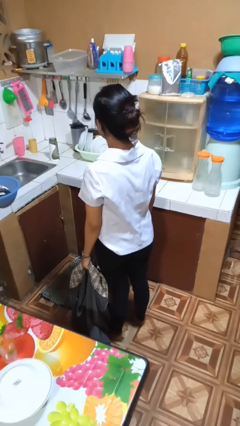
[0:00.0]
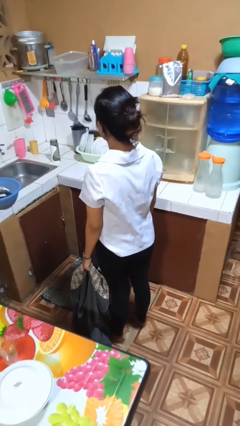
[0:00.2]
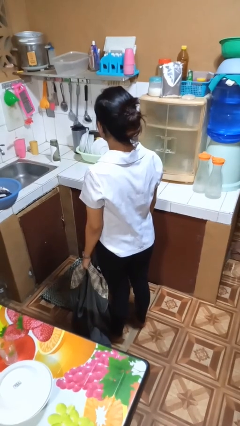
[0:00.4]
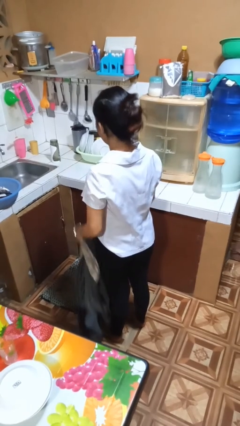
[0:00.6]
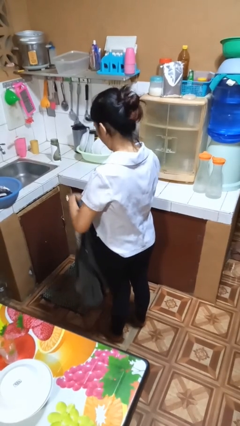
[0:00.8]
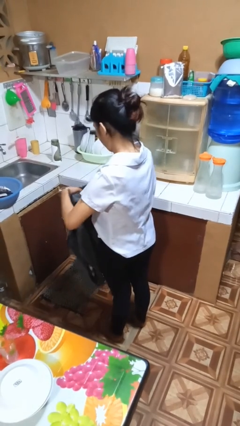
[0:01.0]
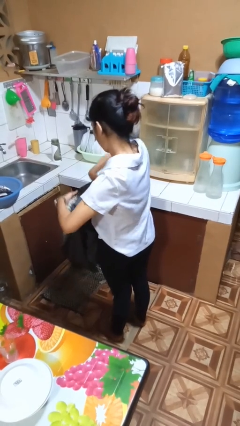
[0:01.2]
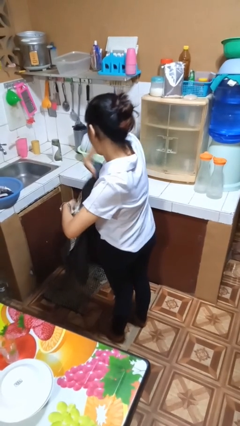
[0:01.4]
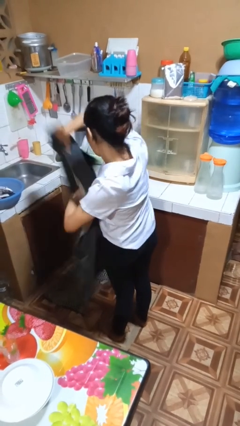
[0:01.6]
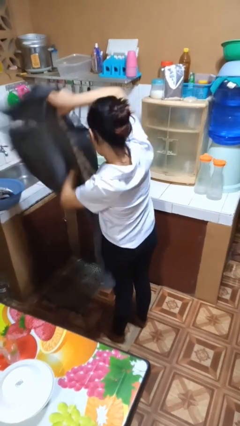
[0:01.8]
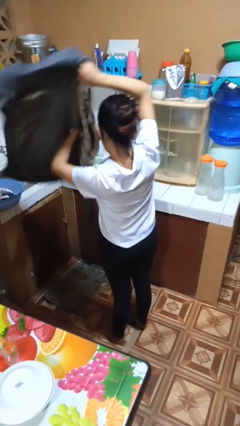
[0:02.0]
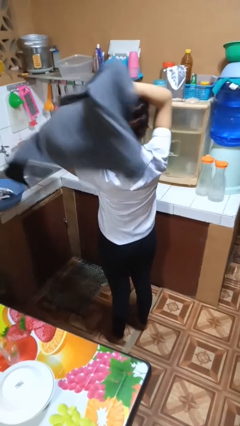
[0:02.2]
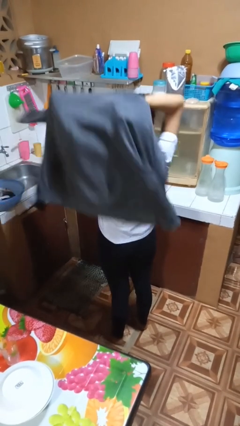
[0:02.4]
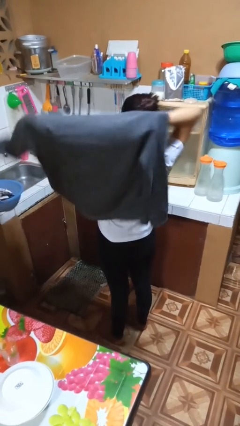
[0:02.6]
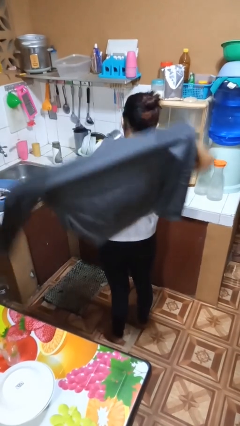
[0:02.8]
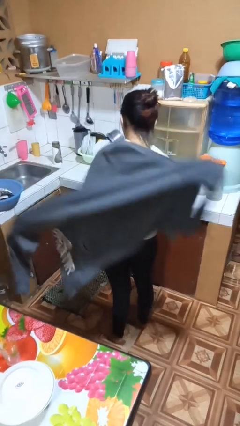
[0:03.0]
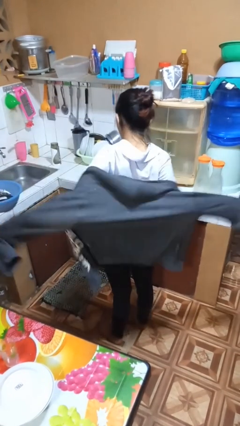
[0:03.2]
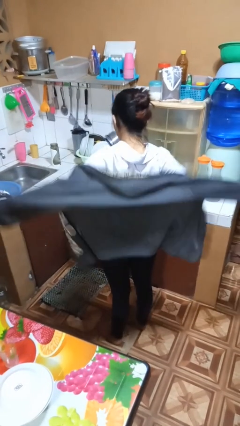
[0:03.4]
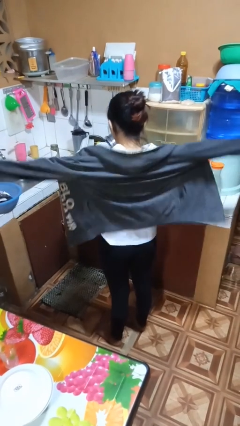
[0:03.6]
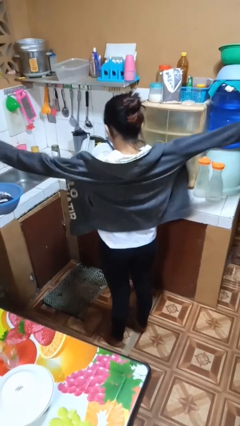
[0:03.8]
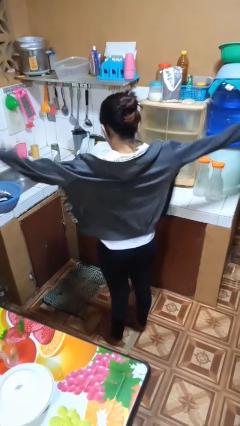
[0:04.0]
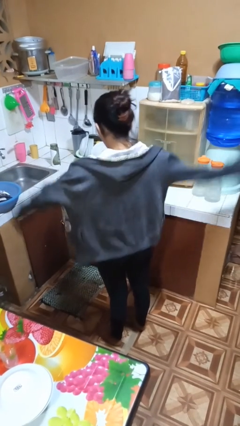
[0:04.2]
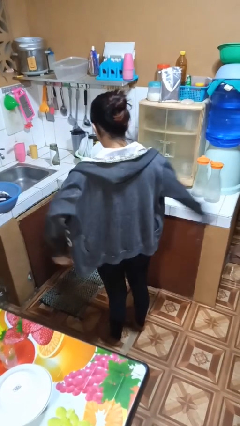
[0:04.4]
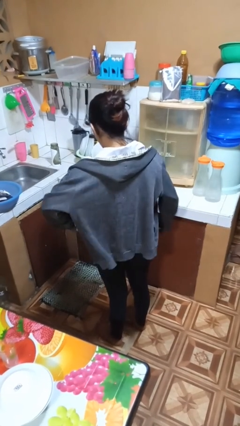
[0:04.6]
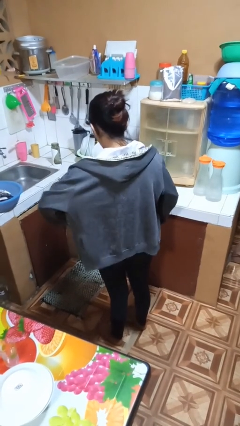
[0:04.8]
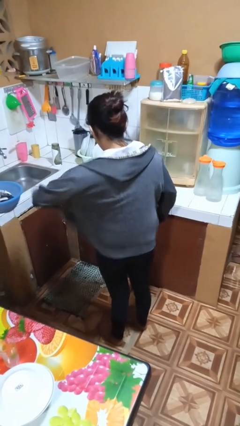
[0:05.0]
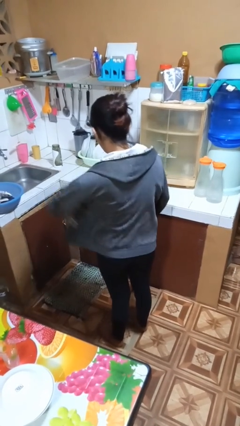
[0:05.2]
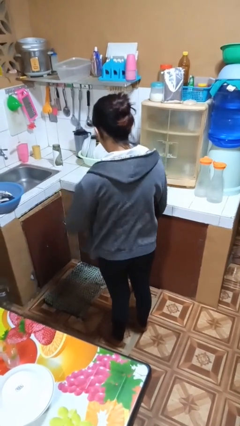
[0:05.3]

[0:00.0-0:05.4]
person puts on jacket

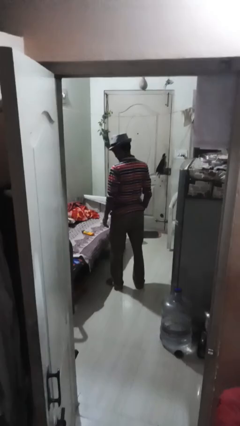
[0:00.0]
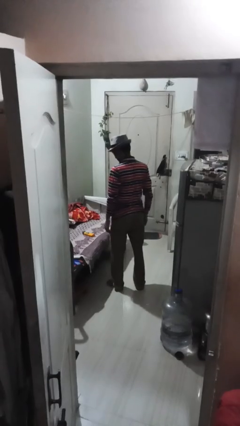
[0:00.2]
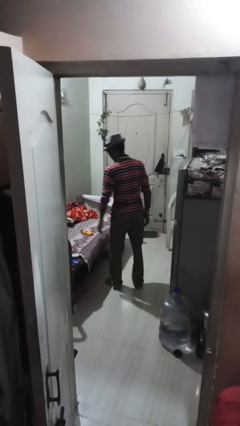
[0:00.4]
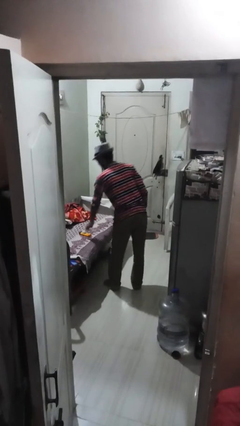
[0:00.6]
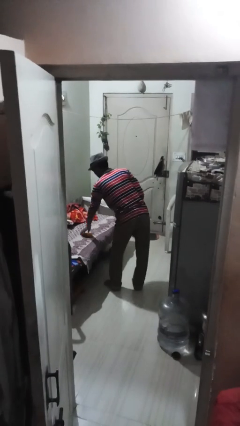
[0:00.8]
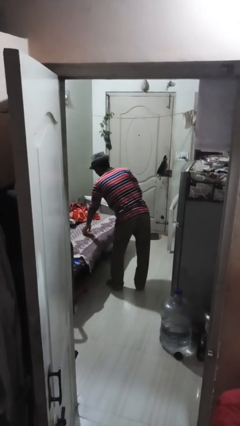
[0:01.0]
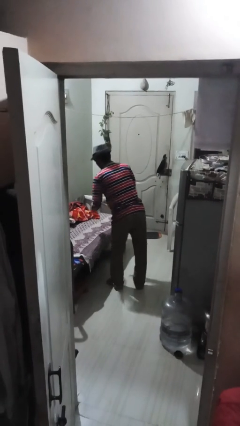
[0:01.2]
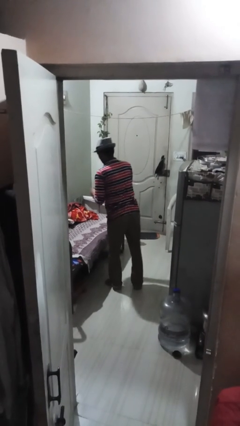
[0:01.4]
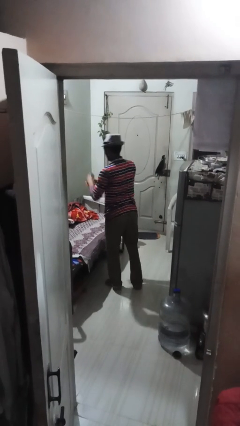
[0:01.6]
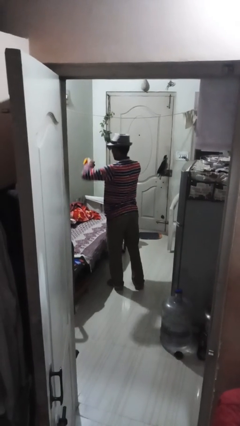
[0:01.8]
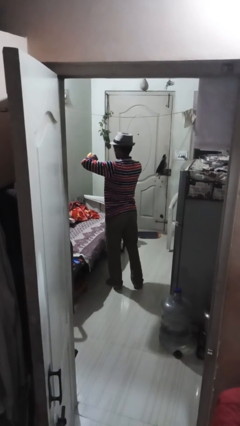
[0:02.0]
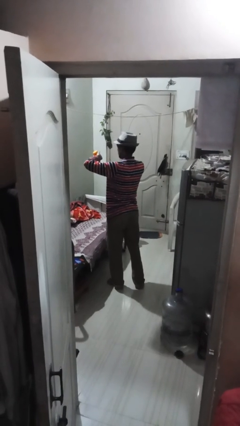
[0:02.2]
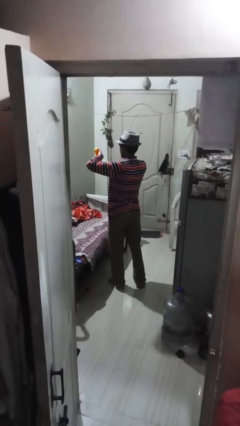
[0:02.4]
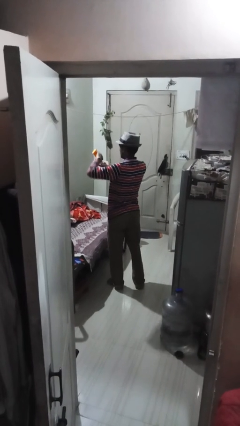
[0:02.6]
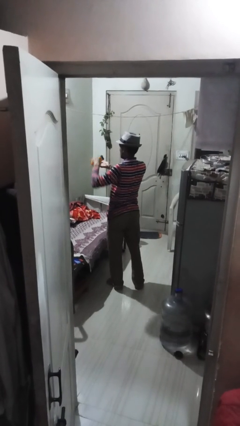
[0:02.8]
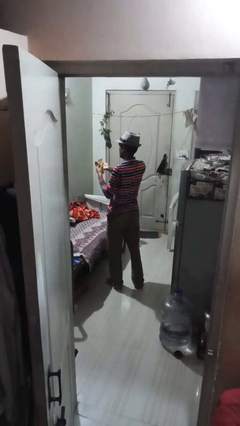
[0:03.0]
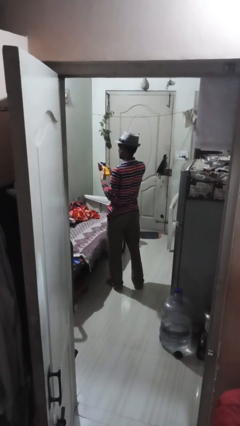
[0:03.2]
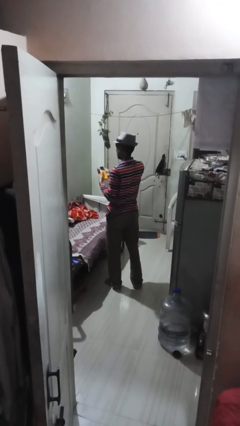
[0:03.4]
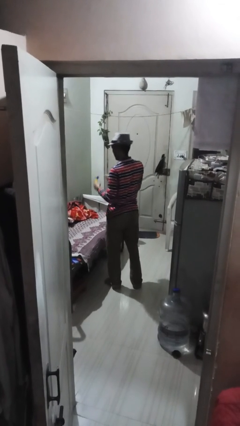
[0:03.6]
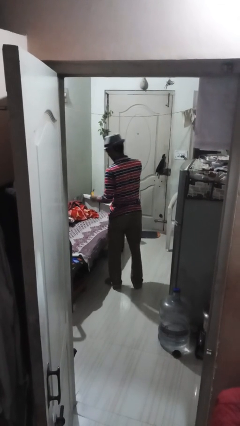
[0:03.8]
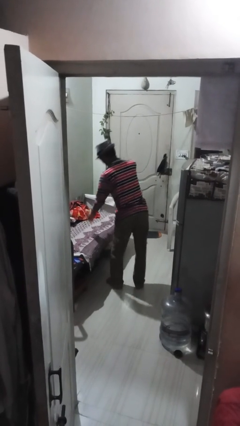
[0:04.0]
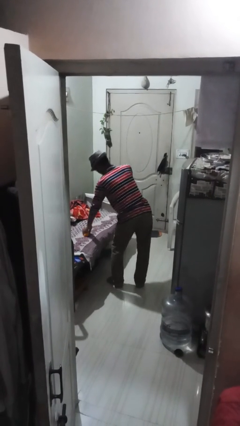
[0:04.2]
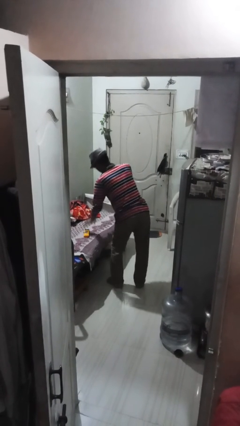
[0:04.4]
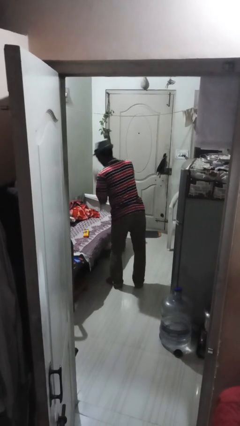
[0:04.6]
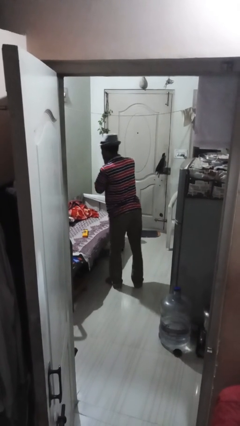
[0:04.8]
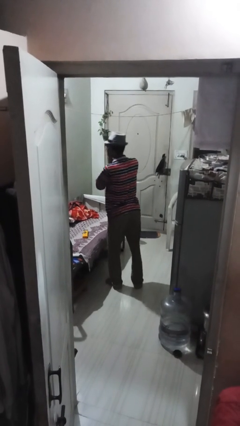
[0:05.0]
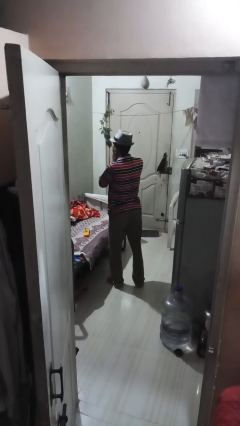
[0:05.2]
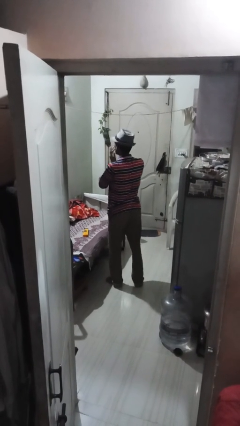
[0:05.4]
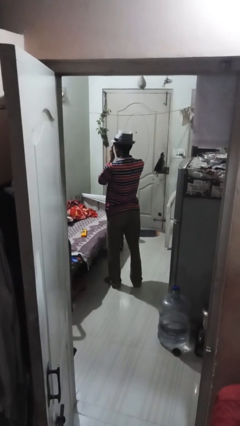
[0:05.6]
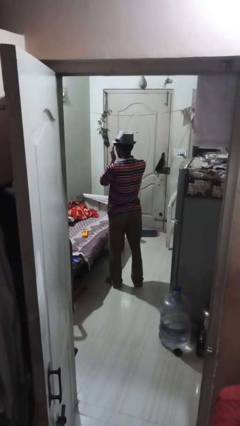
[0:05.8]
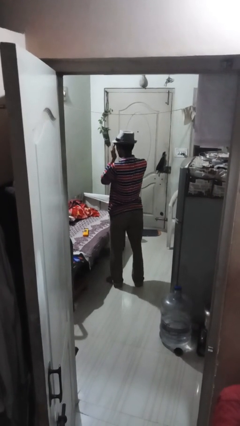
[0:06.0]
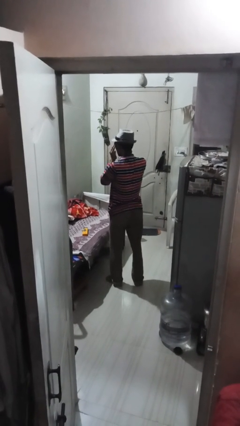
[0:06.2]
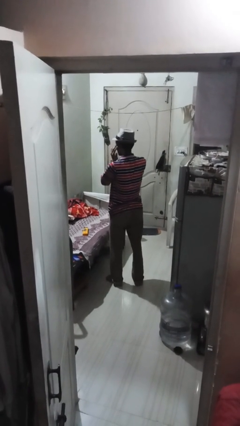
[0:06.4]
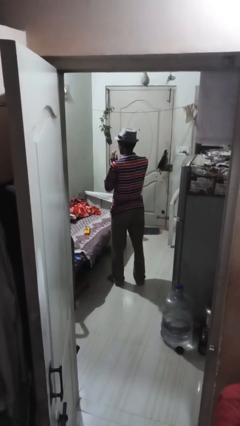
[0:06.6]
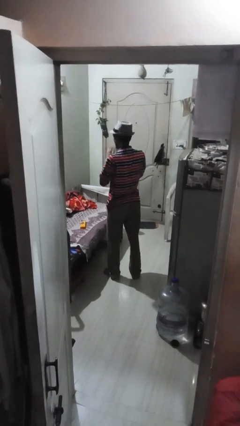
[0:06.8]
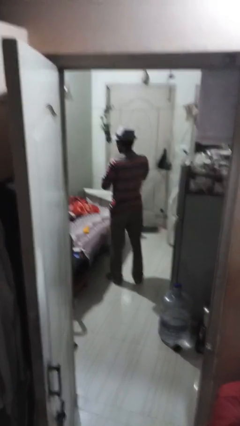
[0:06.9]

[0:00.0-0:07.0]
person applies sunscreen

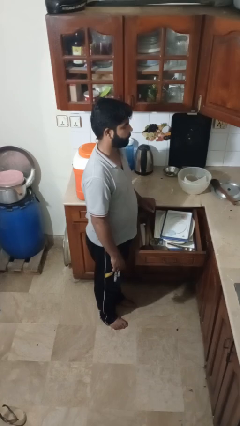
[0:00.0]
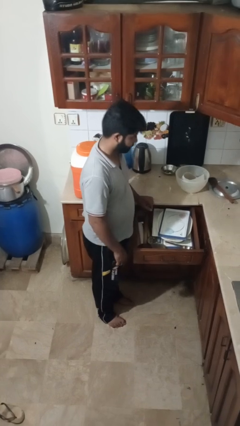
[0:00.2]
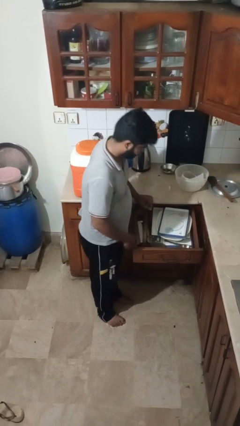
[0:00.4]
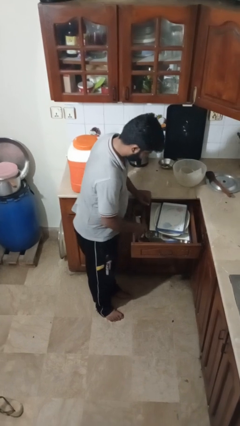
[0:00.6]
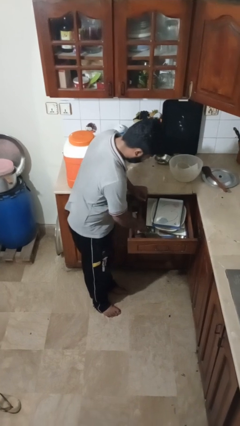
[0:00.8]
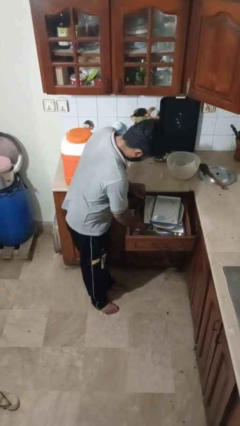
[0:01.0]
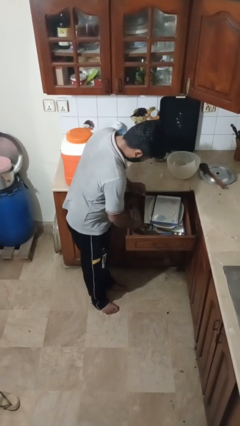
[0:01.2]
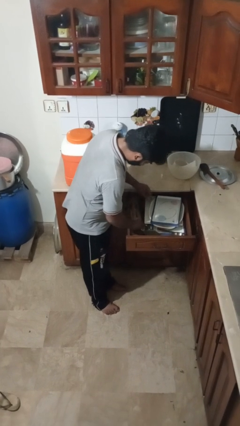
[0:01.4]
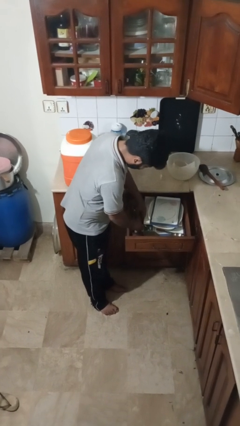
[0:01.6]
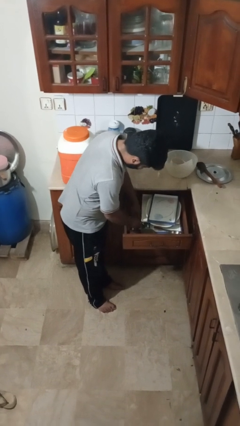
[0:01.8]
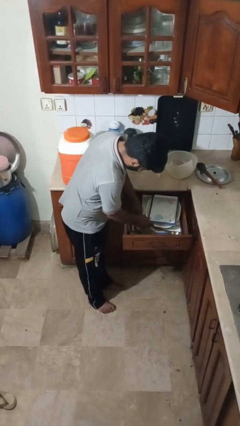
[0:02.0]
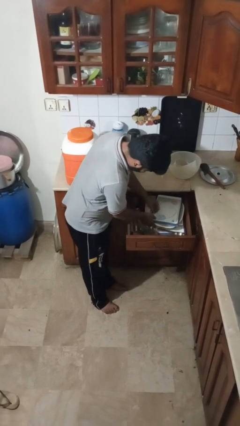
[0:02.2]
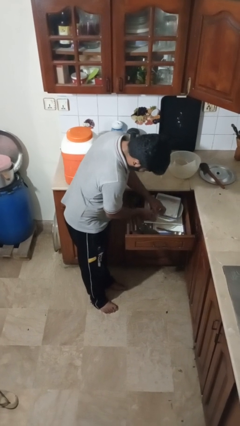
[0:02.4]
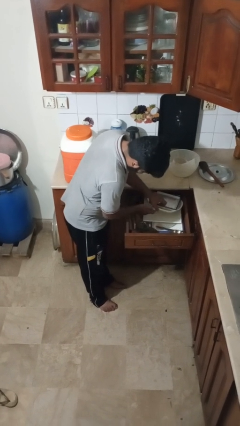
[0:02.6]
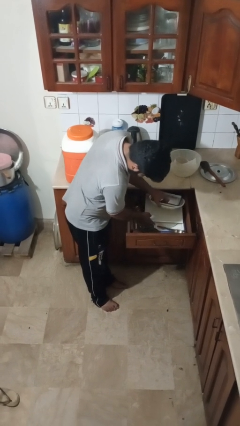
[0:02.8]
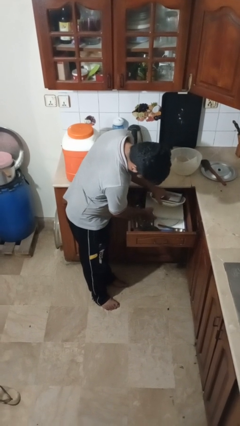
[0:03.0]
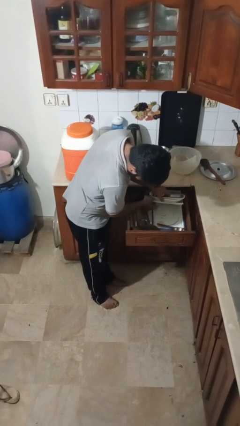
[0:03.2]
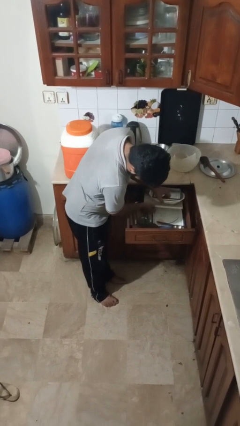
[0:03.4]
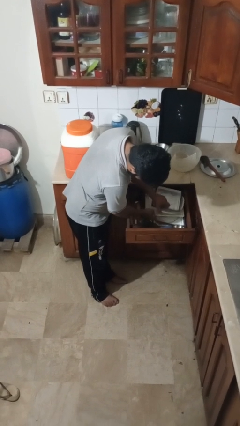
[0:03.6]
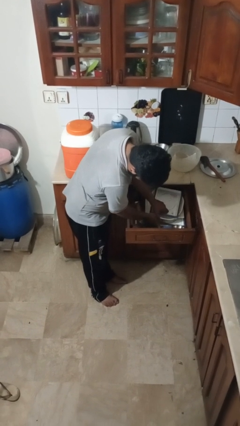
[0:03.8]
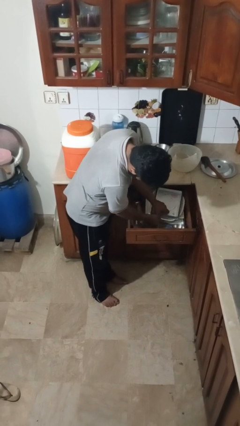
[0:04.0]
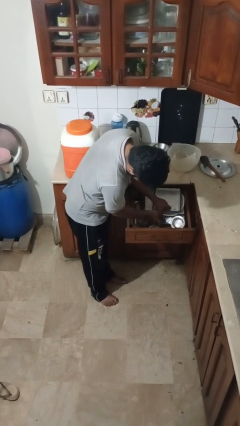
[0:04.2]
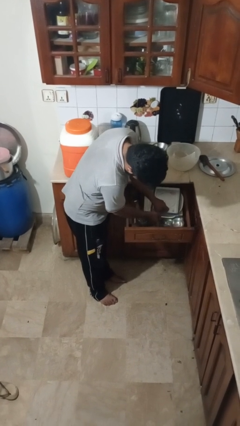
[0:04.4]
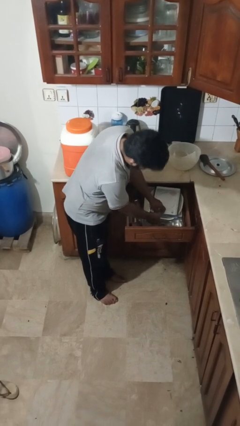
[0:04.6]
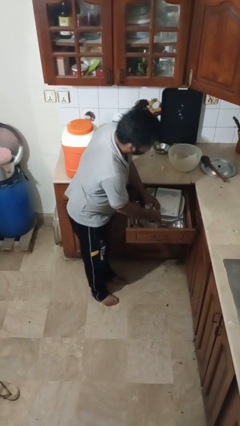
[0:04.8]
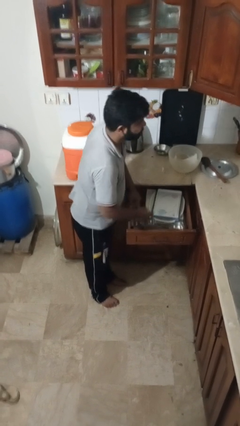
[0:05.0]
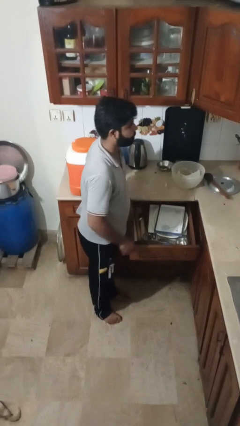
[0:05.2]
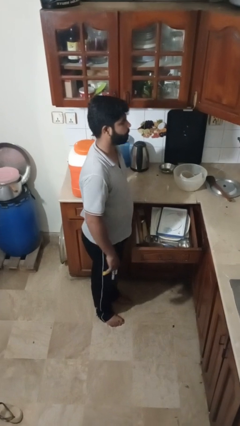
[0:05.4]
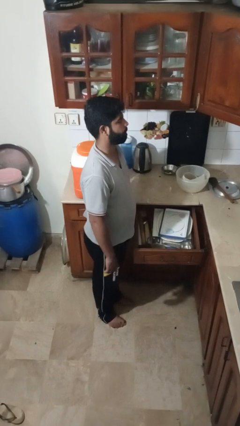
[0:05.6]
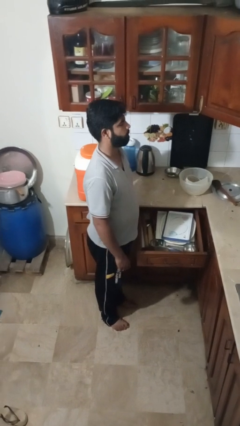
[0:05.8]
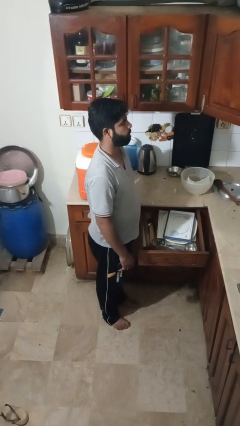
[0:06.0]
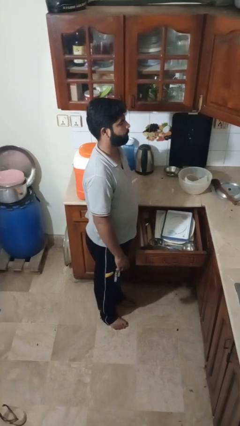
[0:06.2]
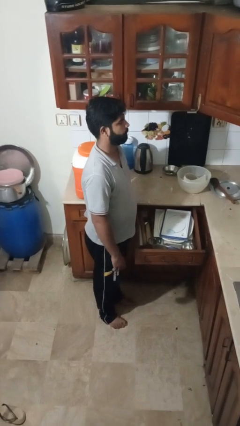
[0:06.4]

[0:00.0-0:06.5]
person searches in kitchen drawer
